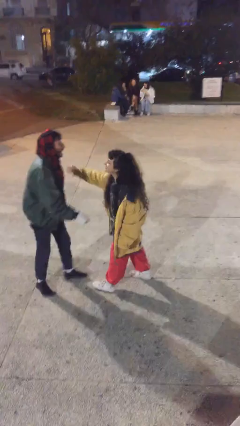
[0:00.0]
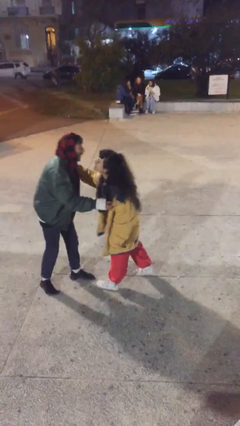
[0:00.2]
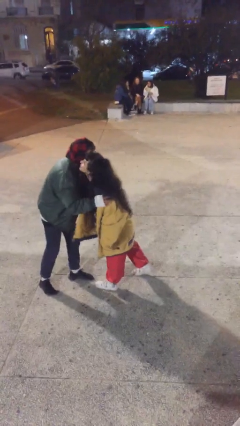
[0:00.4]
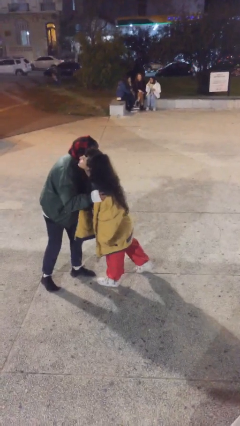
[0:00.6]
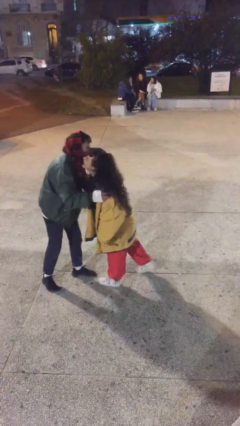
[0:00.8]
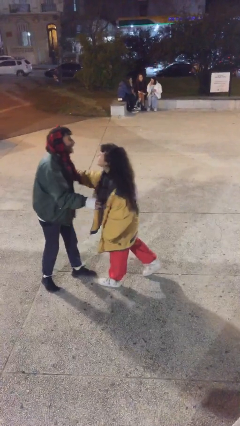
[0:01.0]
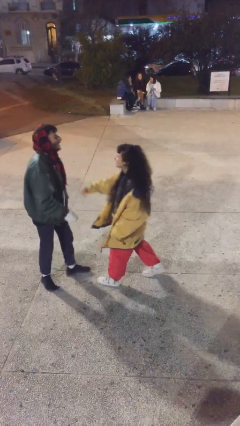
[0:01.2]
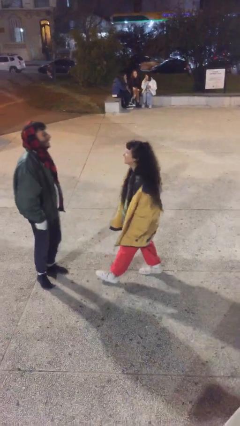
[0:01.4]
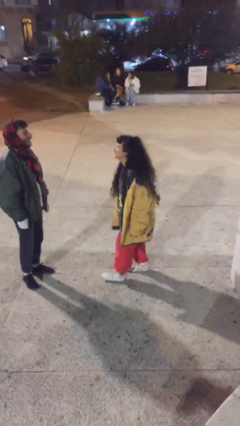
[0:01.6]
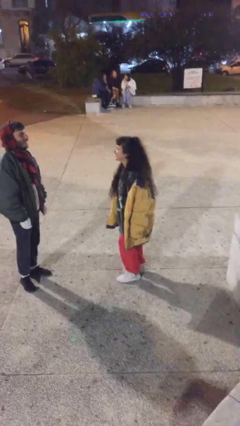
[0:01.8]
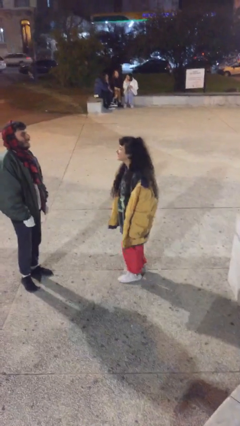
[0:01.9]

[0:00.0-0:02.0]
person kisses cheek of person

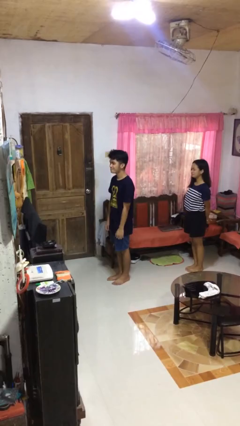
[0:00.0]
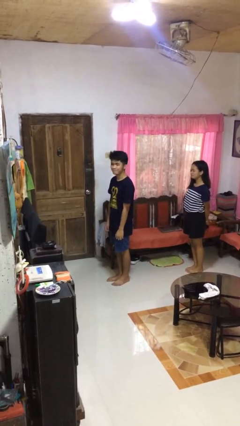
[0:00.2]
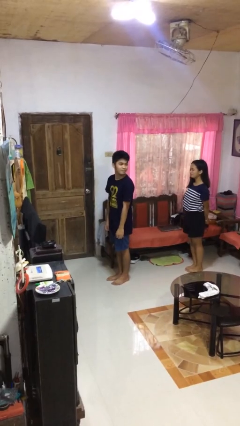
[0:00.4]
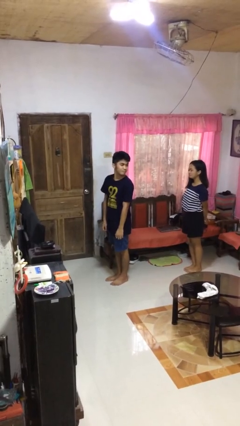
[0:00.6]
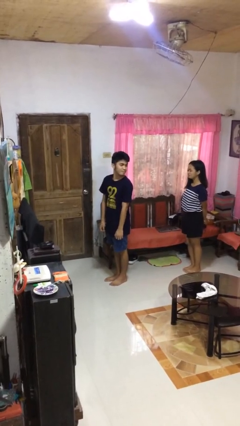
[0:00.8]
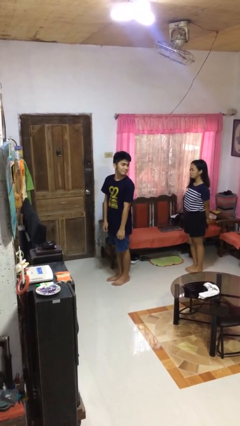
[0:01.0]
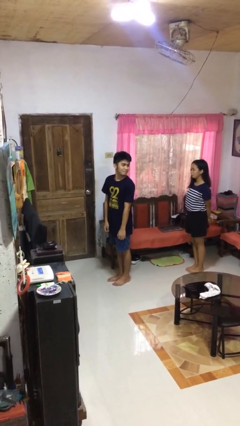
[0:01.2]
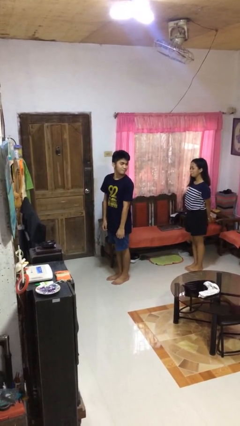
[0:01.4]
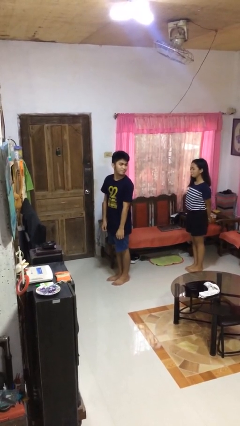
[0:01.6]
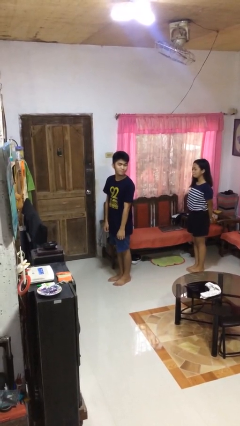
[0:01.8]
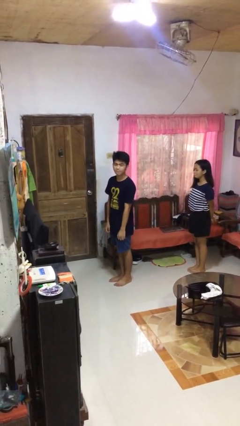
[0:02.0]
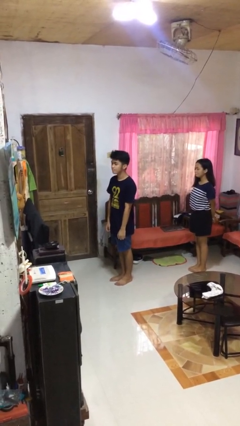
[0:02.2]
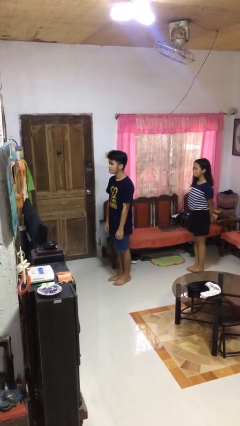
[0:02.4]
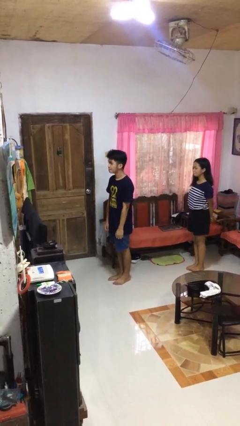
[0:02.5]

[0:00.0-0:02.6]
person looks over shoulder

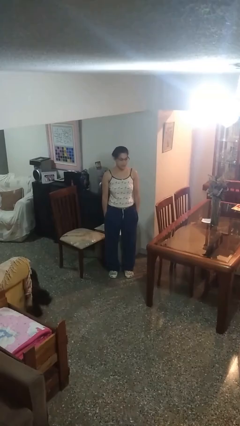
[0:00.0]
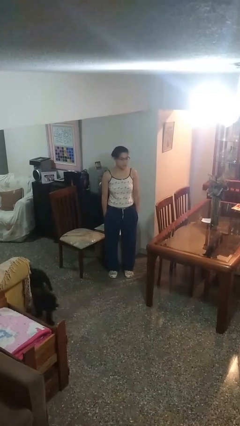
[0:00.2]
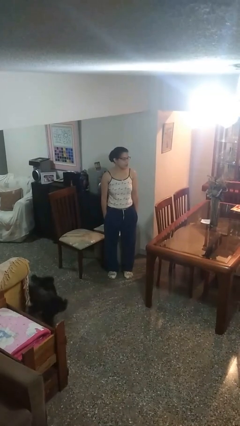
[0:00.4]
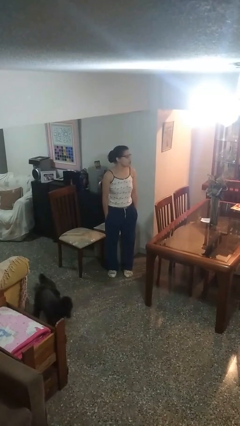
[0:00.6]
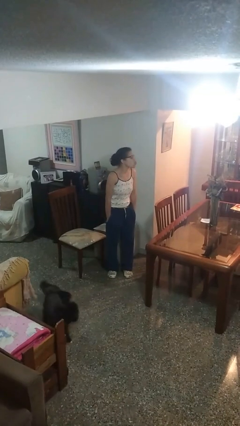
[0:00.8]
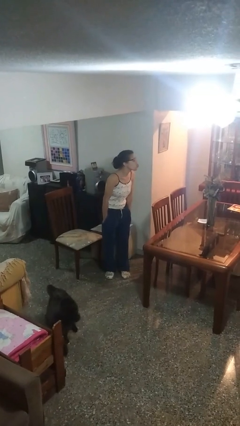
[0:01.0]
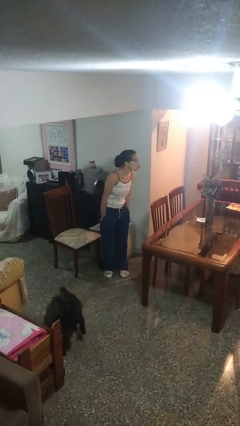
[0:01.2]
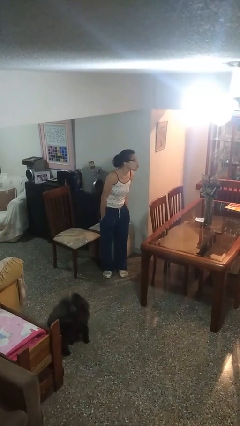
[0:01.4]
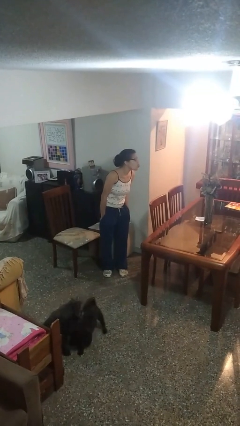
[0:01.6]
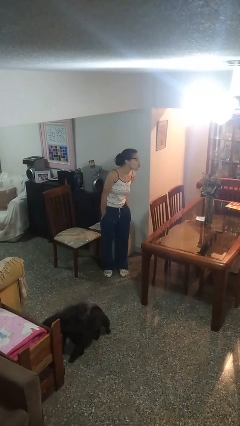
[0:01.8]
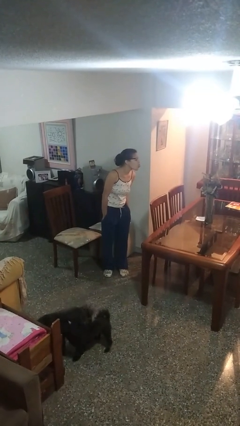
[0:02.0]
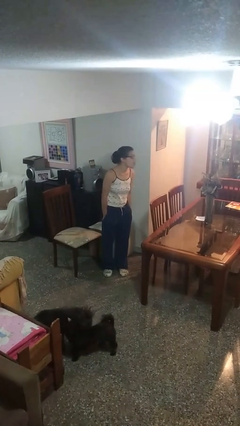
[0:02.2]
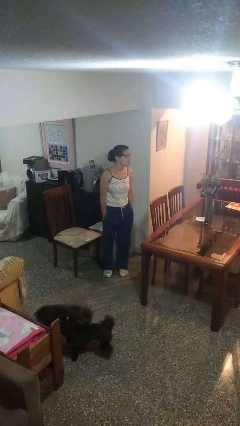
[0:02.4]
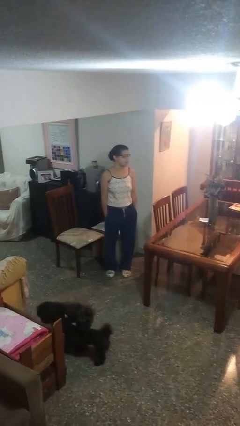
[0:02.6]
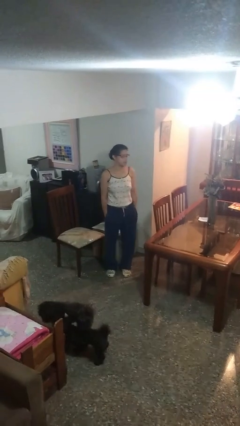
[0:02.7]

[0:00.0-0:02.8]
person sticks out tongue

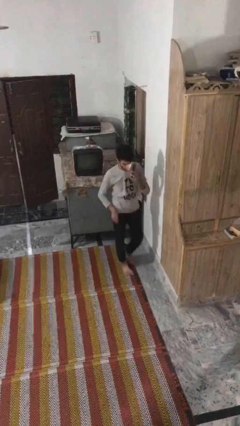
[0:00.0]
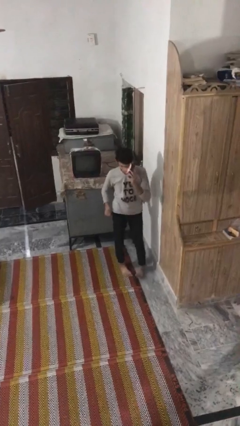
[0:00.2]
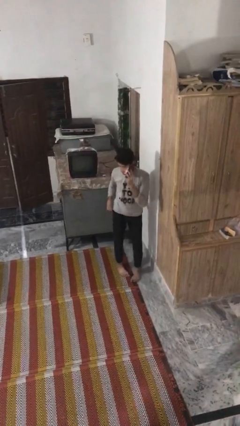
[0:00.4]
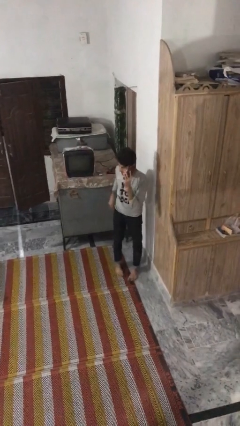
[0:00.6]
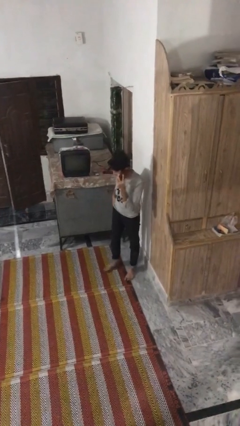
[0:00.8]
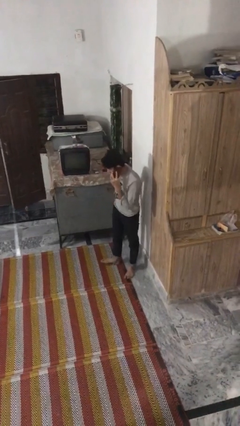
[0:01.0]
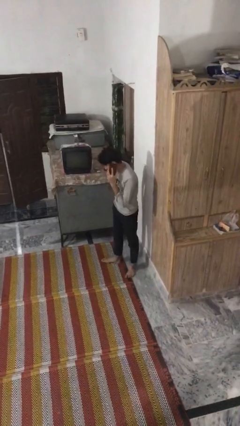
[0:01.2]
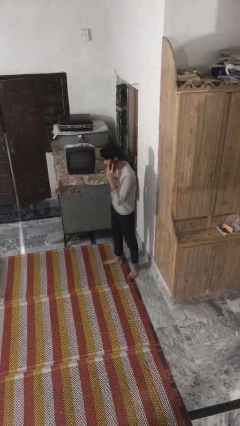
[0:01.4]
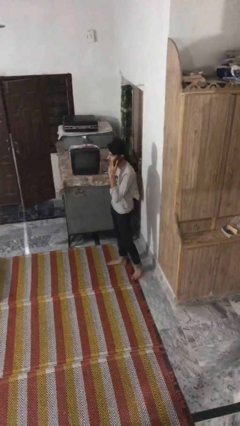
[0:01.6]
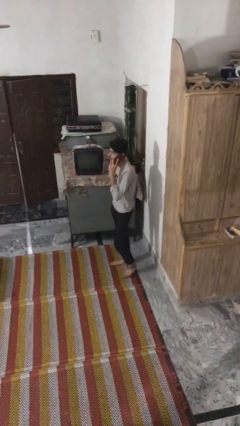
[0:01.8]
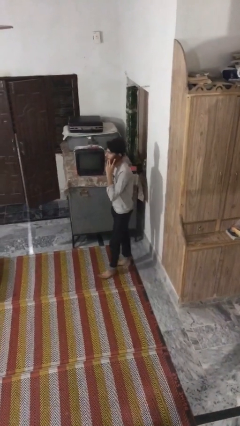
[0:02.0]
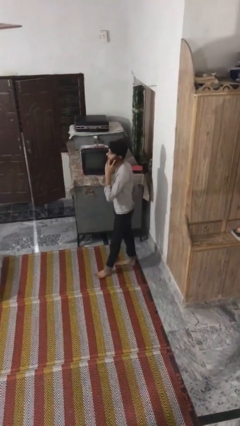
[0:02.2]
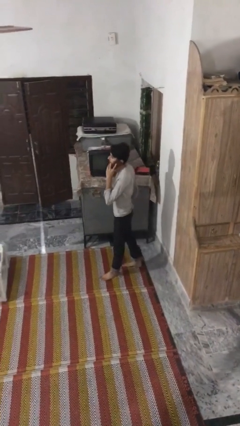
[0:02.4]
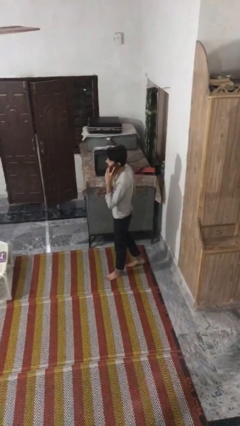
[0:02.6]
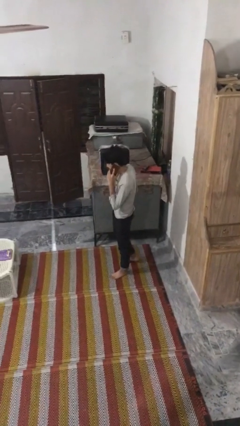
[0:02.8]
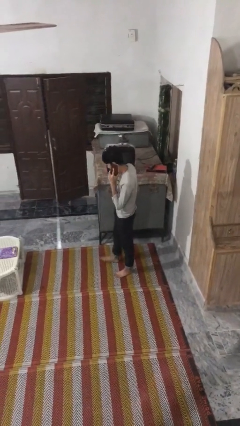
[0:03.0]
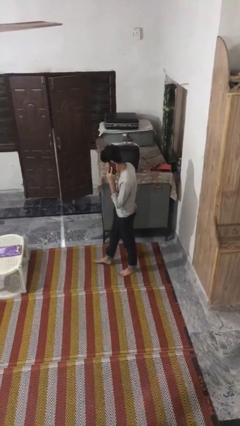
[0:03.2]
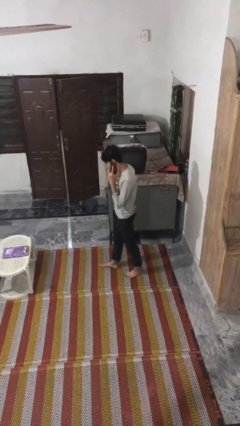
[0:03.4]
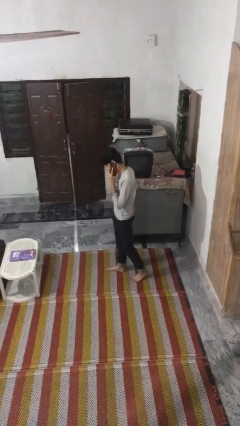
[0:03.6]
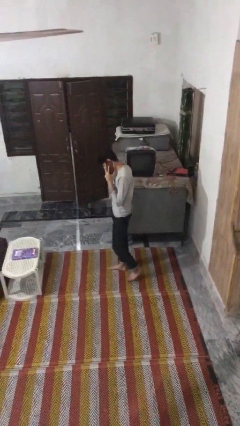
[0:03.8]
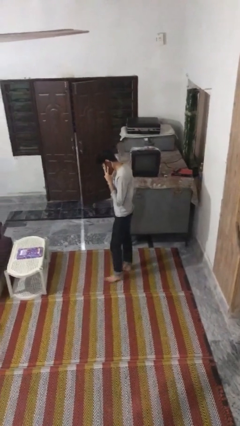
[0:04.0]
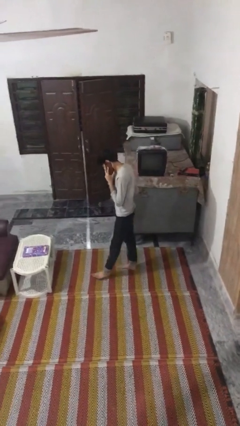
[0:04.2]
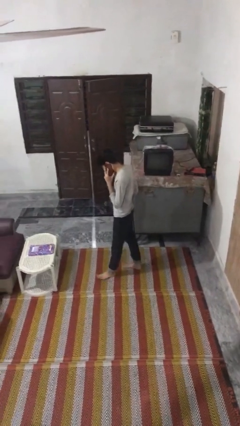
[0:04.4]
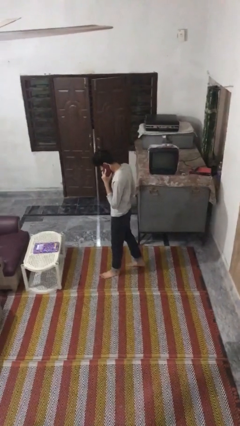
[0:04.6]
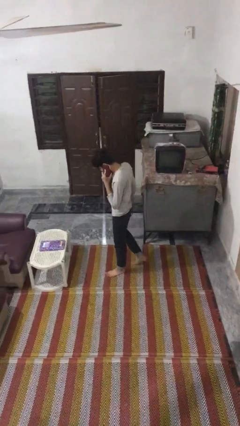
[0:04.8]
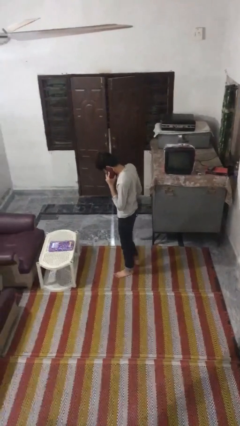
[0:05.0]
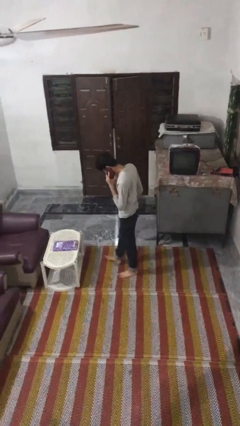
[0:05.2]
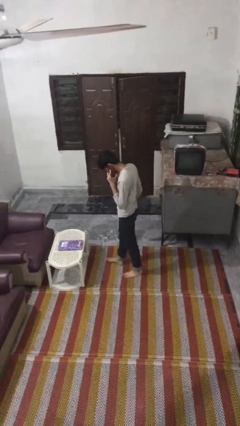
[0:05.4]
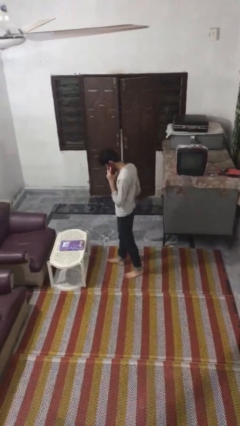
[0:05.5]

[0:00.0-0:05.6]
person talks on phone

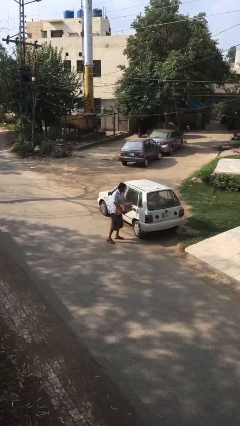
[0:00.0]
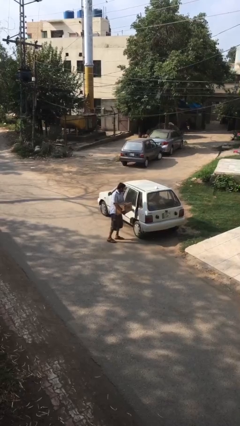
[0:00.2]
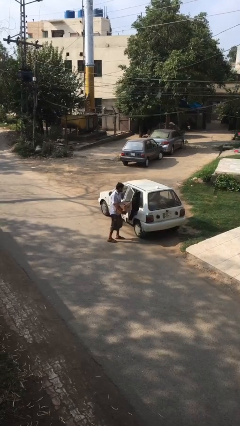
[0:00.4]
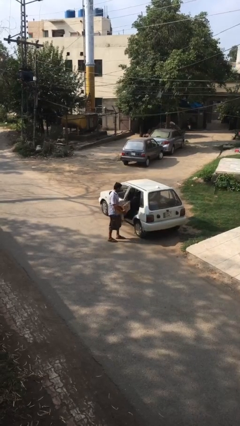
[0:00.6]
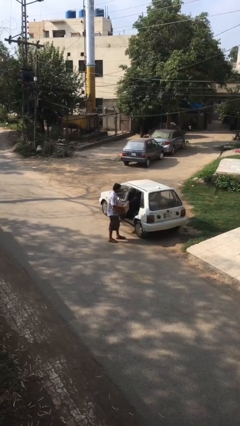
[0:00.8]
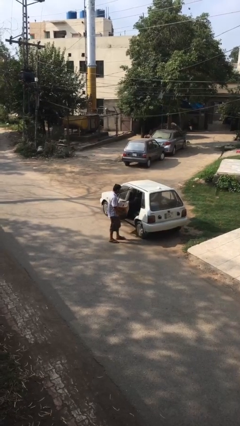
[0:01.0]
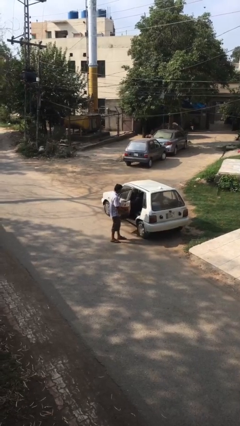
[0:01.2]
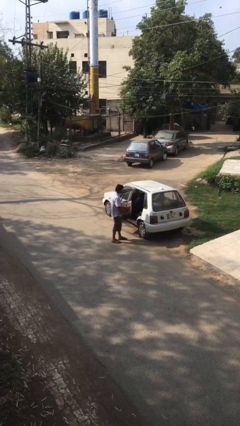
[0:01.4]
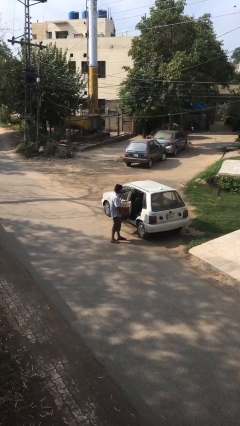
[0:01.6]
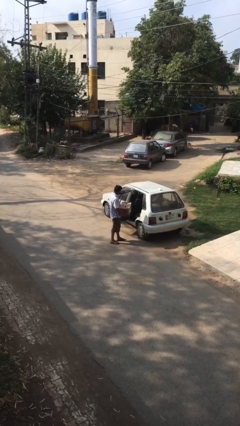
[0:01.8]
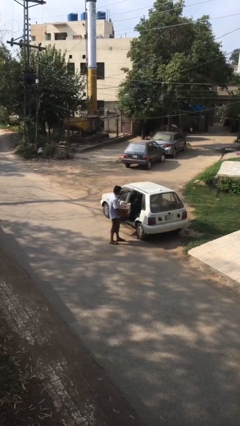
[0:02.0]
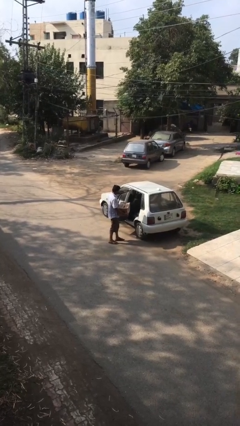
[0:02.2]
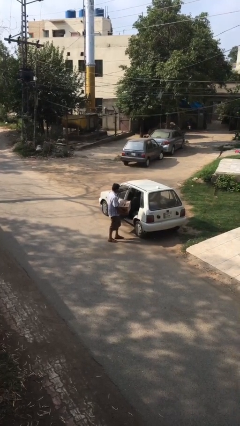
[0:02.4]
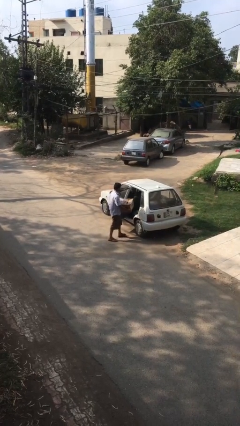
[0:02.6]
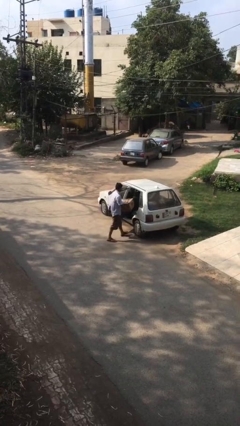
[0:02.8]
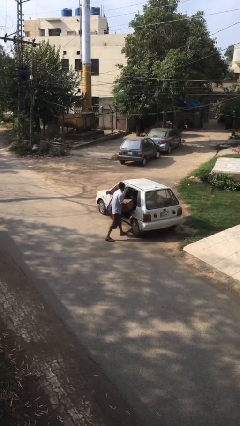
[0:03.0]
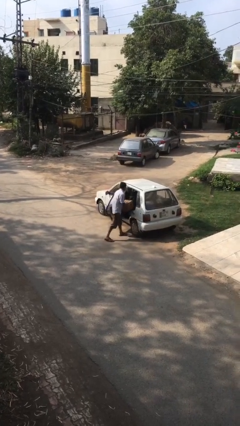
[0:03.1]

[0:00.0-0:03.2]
person opens car door

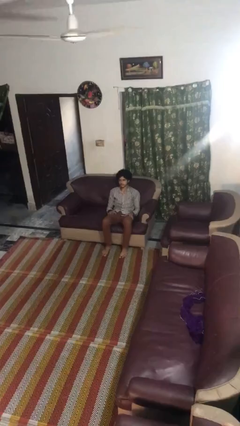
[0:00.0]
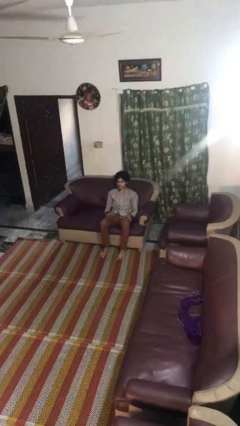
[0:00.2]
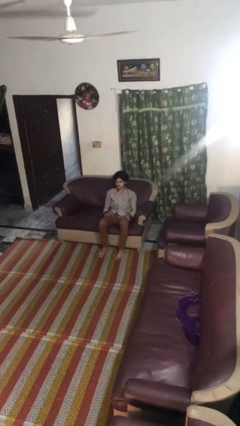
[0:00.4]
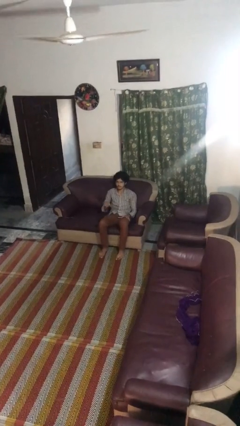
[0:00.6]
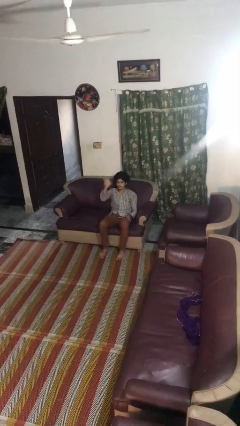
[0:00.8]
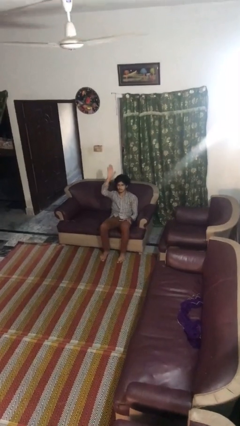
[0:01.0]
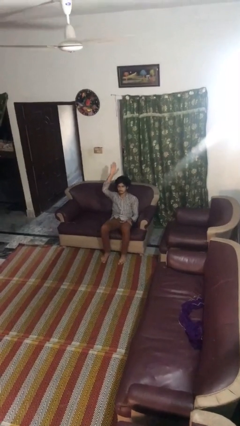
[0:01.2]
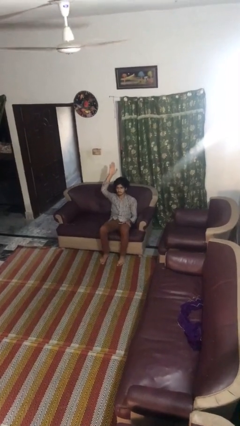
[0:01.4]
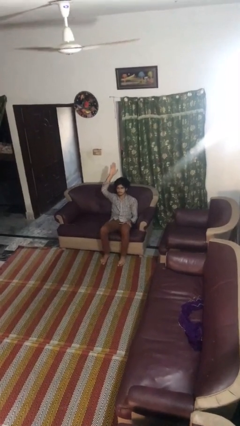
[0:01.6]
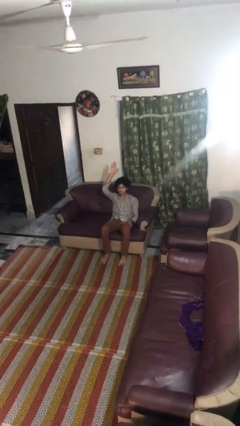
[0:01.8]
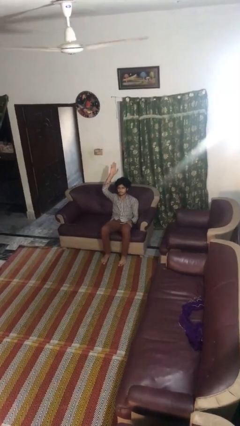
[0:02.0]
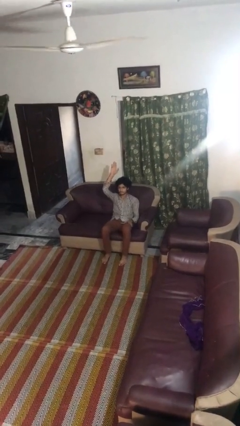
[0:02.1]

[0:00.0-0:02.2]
person gestures raise hand
